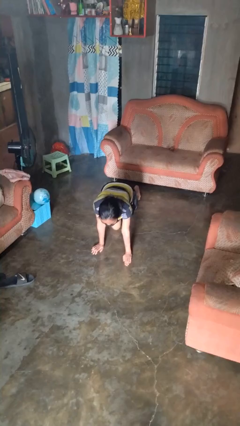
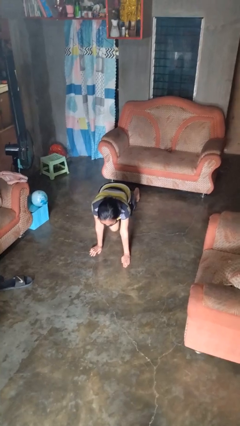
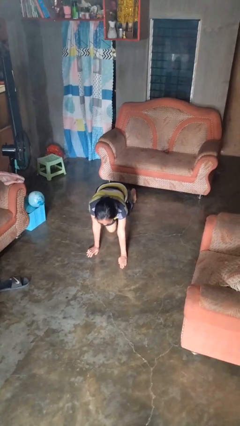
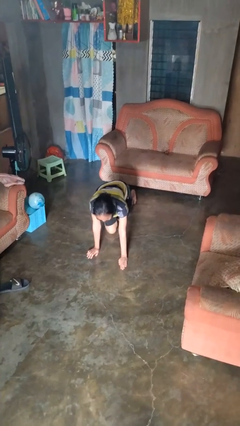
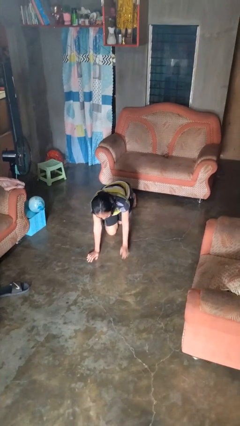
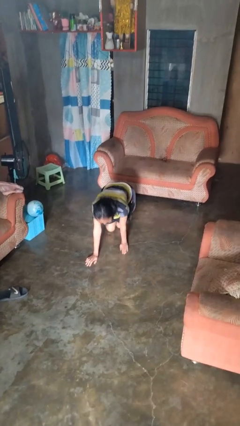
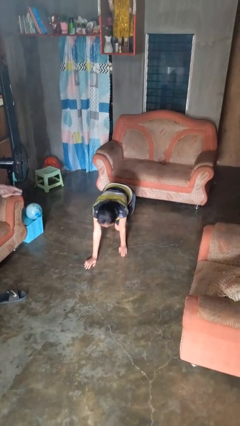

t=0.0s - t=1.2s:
person crawls

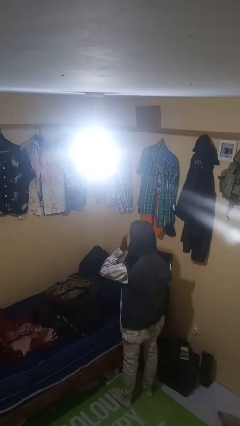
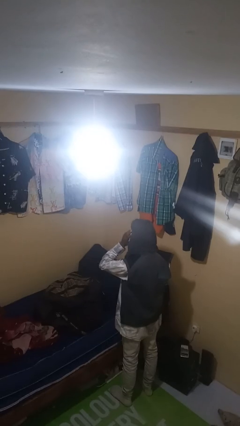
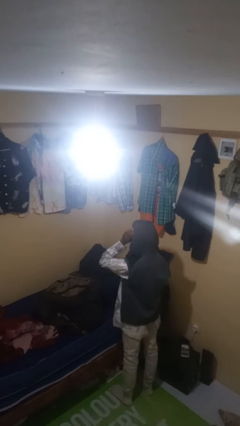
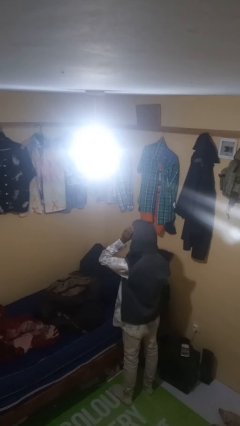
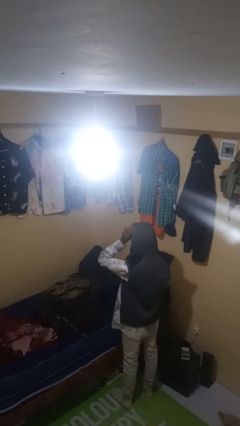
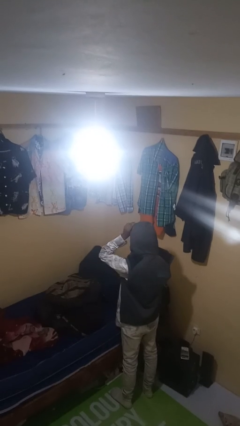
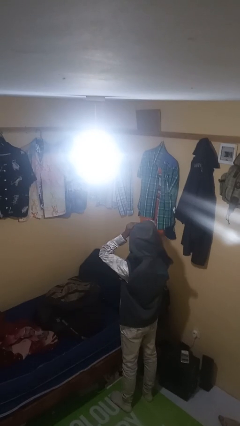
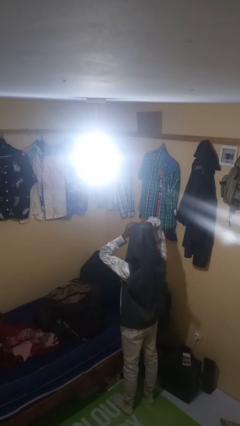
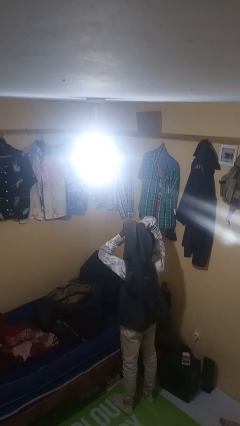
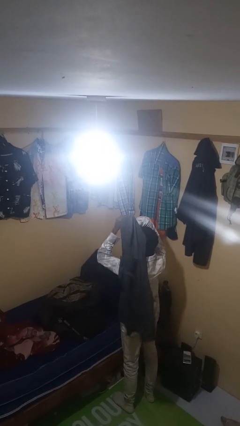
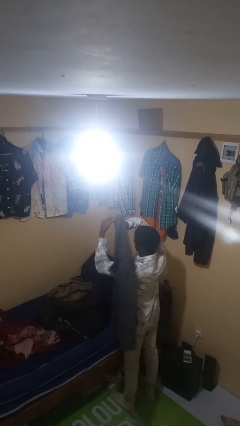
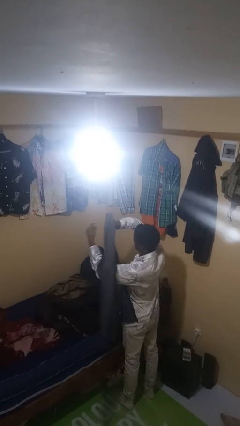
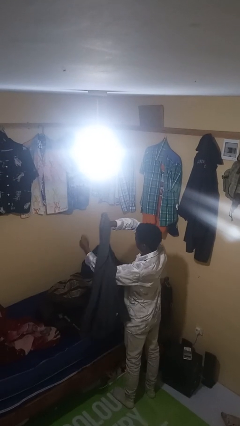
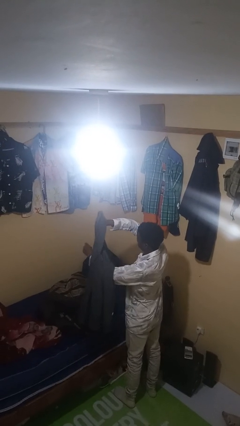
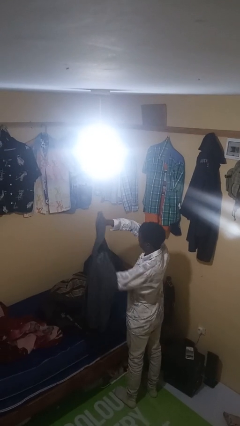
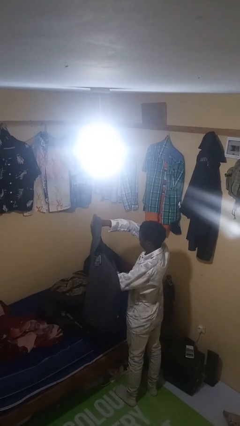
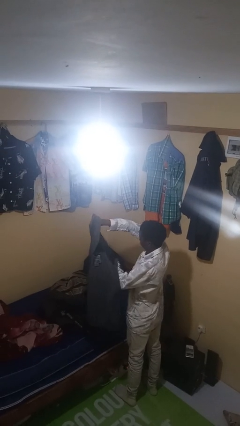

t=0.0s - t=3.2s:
person takes off hoodie

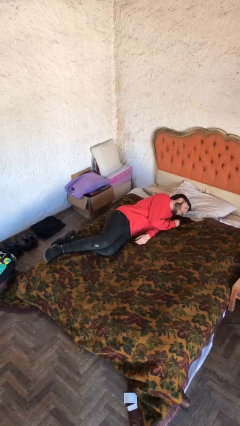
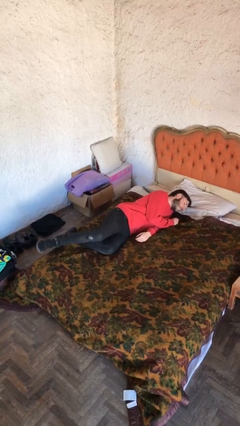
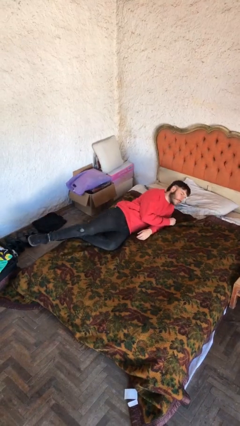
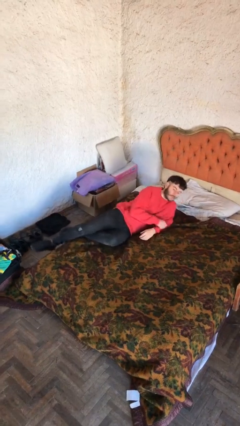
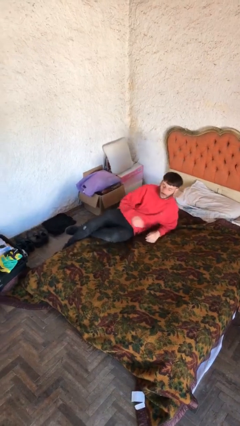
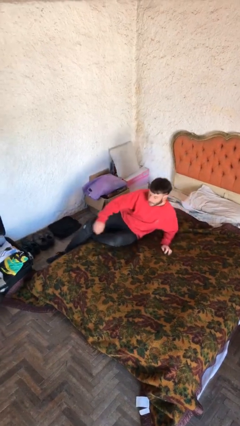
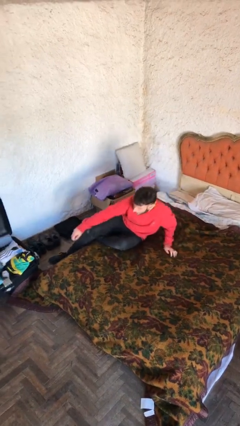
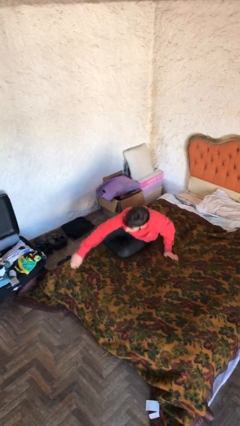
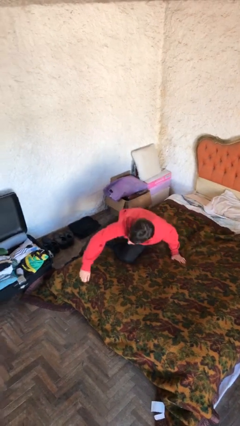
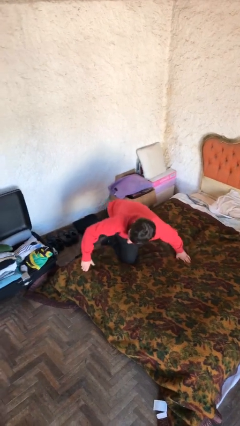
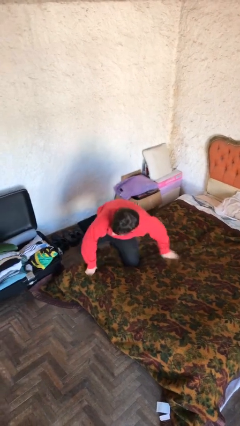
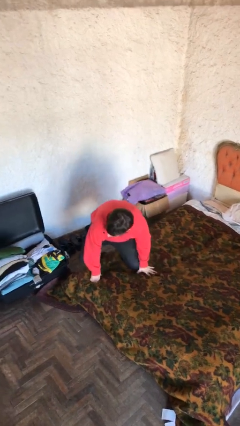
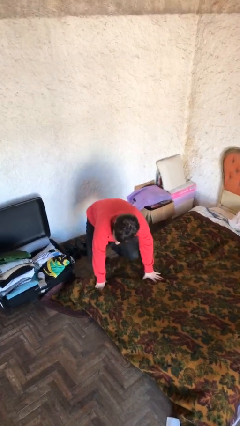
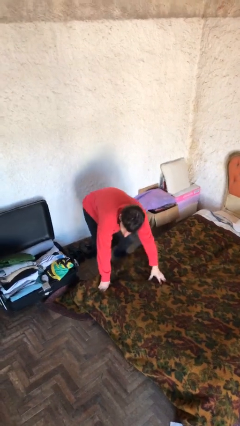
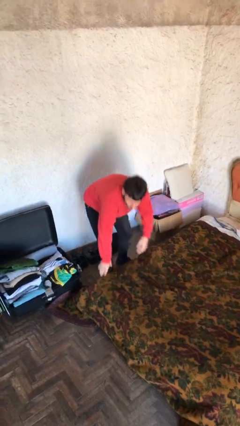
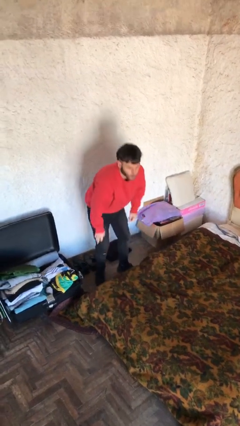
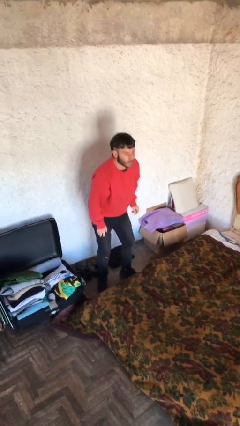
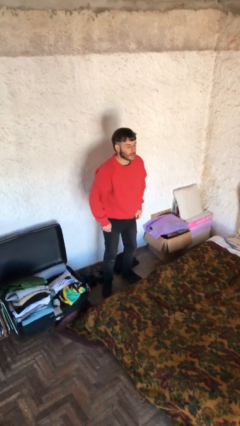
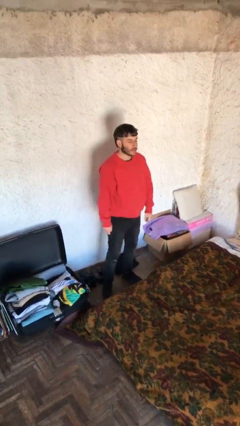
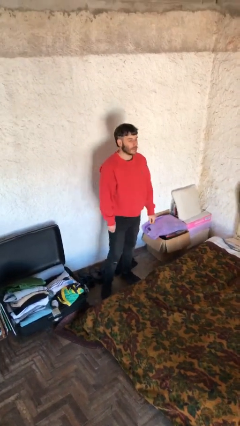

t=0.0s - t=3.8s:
person stands up

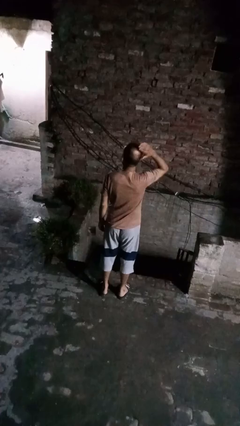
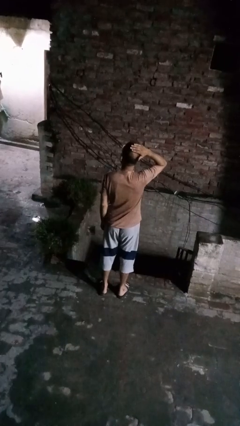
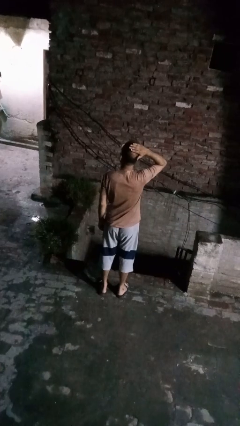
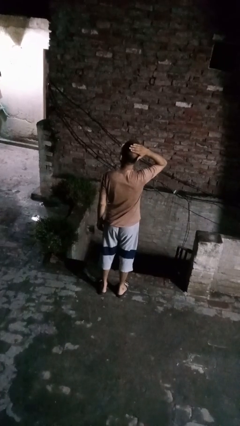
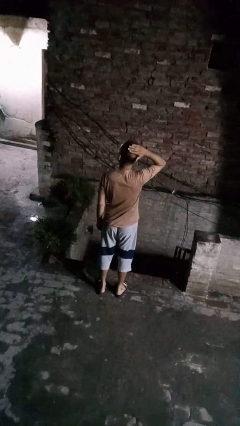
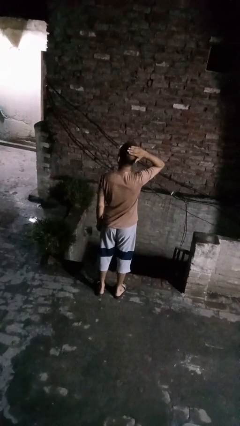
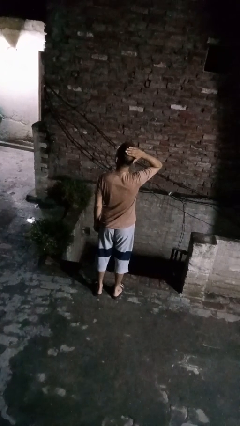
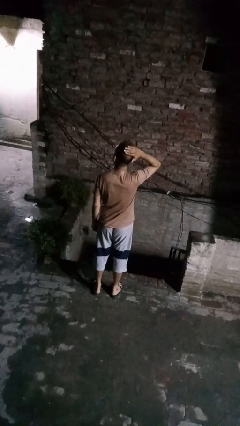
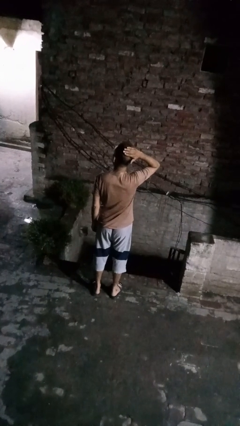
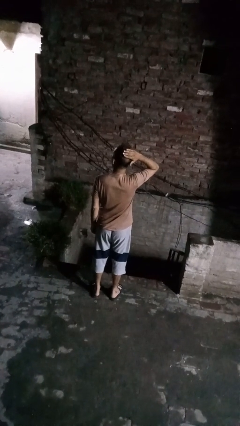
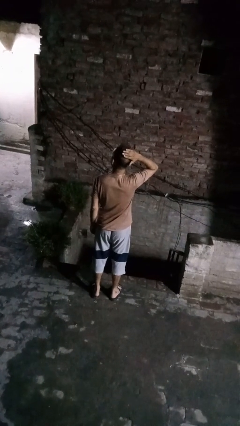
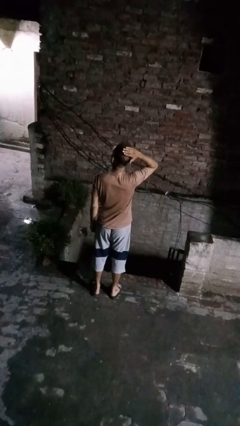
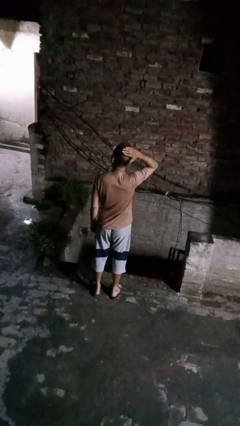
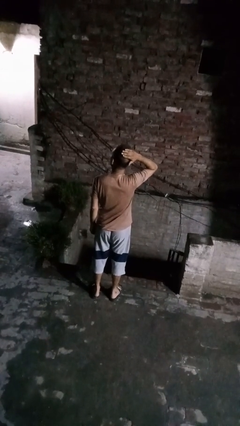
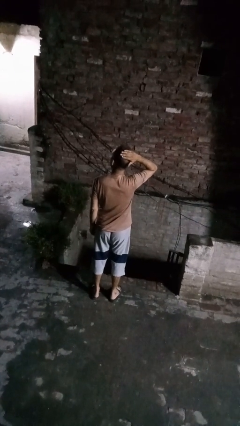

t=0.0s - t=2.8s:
person pats head

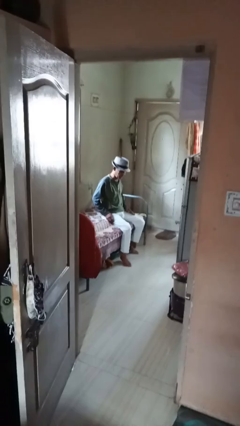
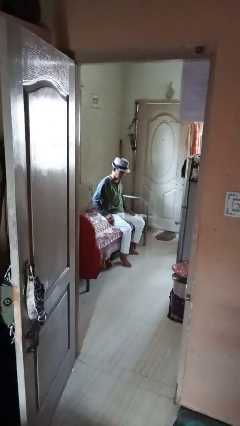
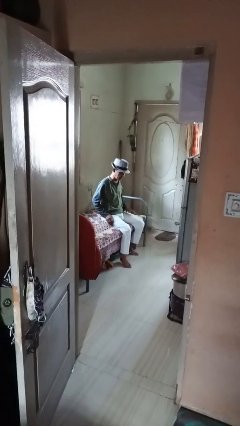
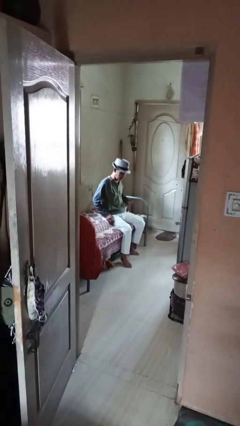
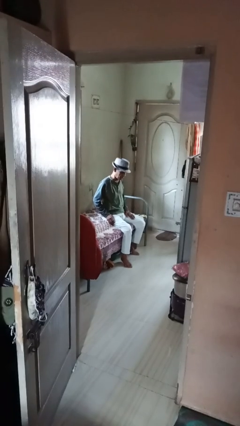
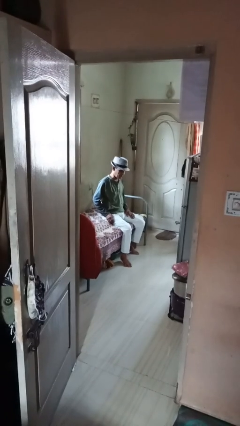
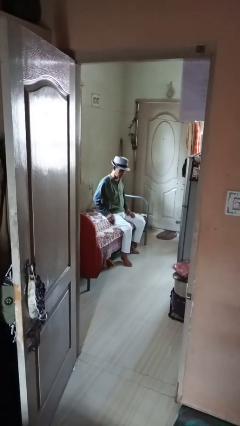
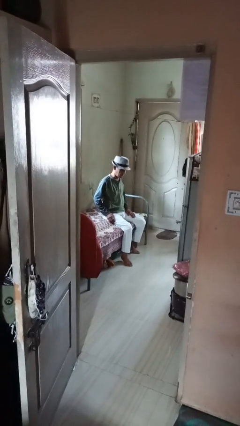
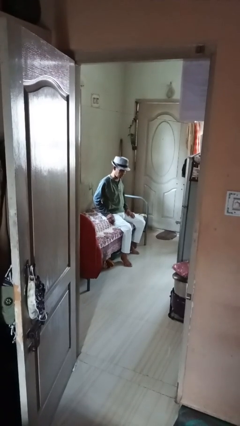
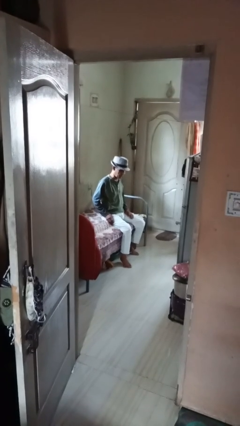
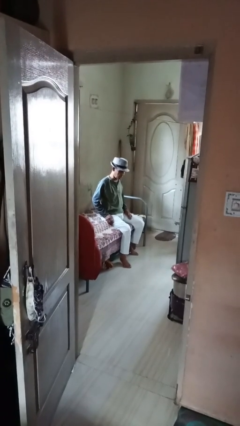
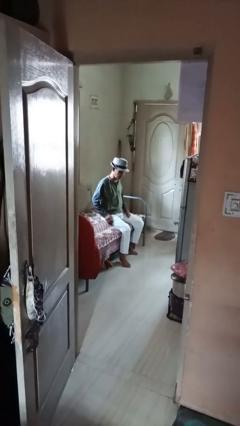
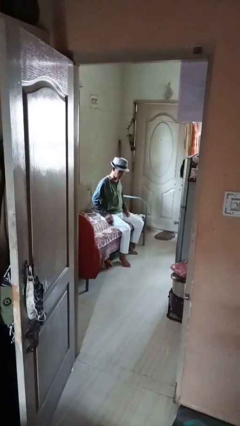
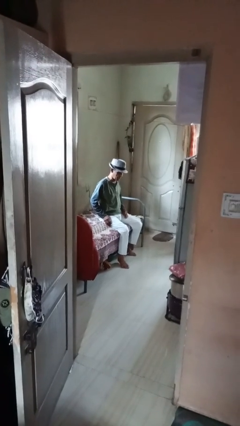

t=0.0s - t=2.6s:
person swats bug

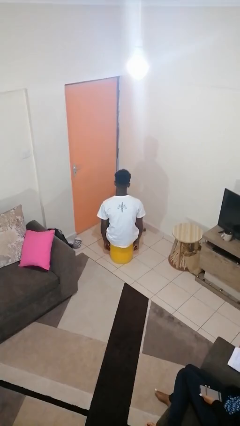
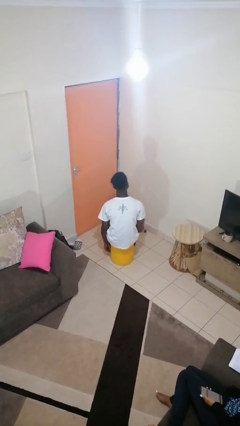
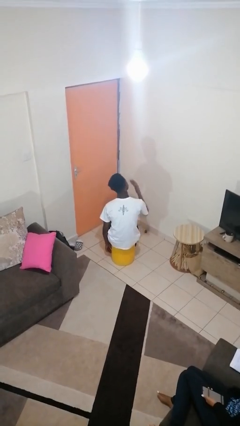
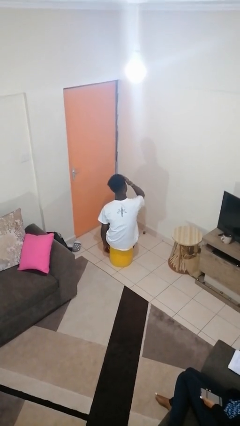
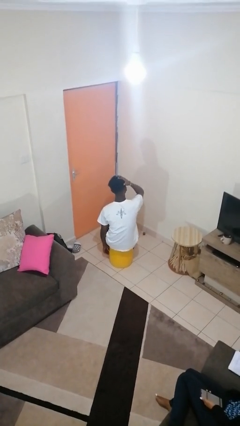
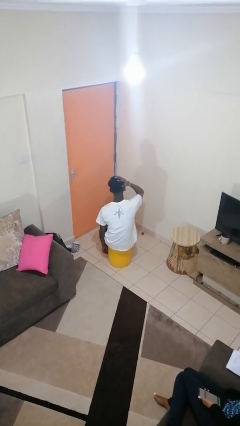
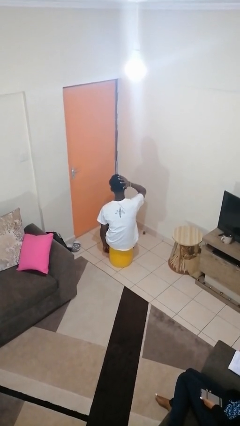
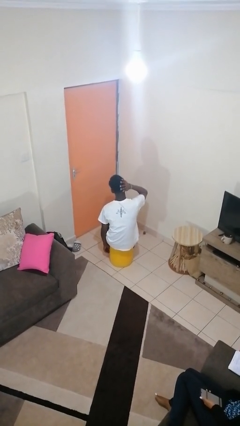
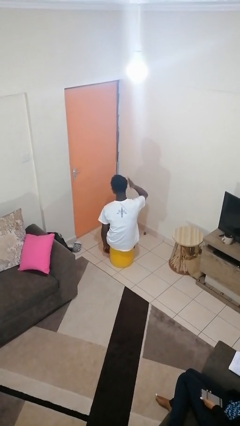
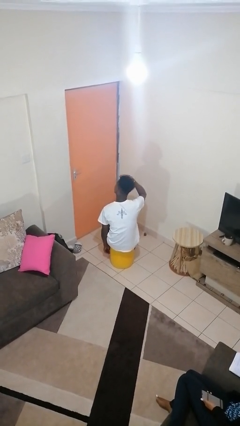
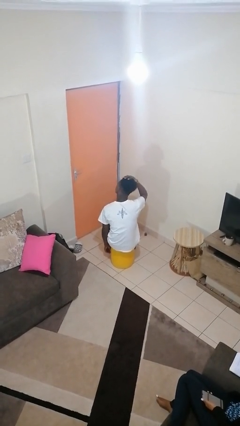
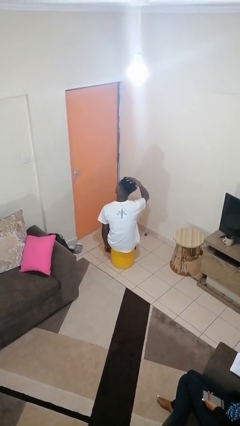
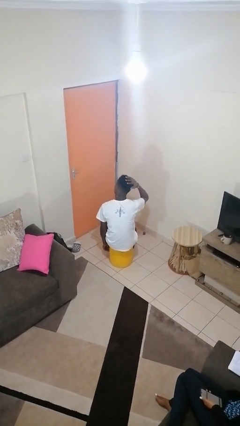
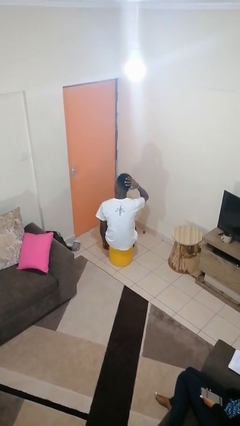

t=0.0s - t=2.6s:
person strokes hair

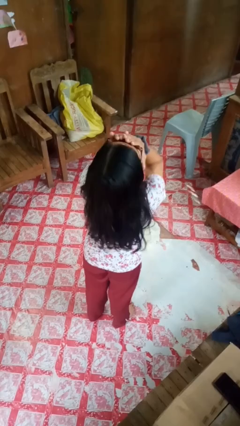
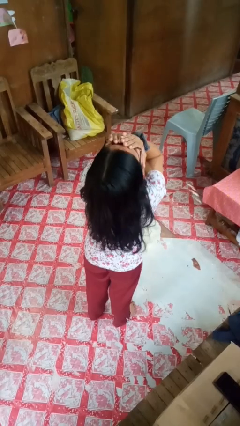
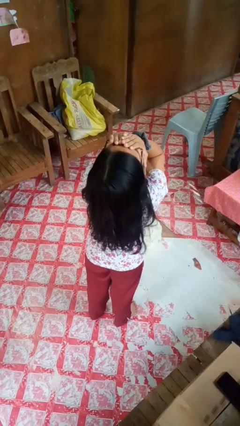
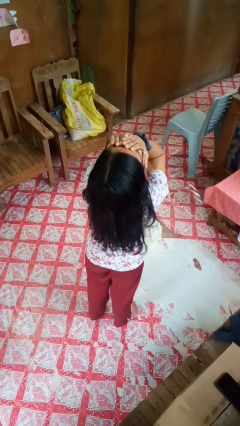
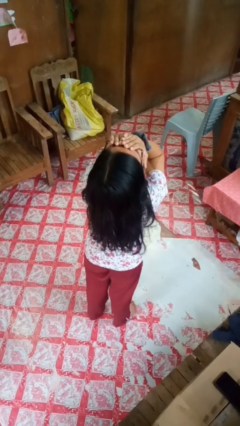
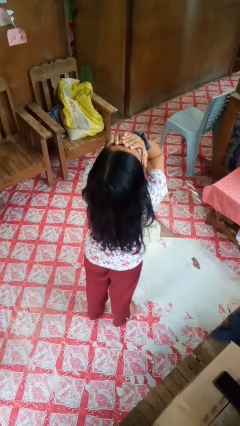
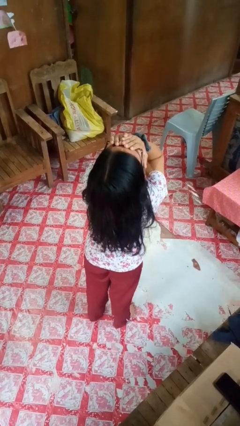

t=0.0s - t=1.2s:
person covers face with hands
